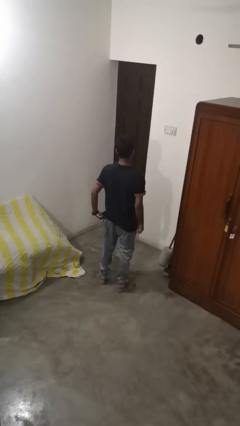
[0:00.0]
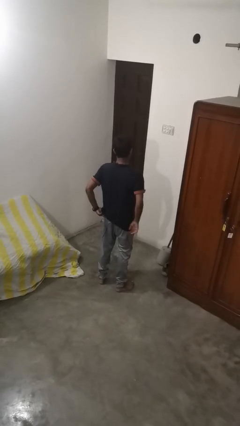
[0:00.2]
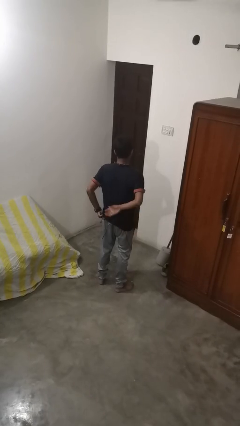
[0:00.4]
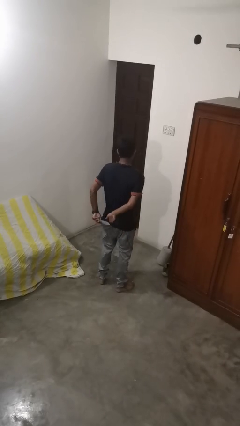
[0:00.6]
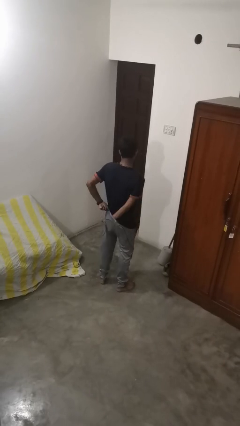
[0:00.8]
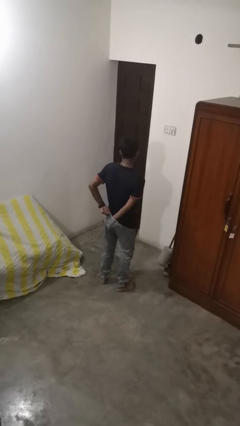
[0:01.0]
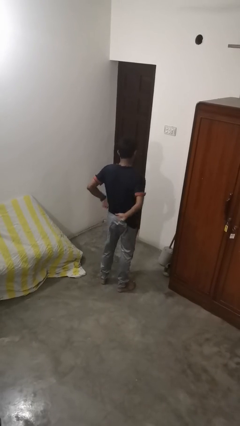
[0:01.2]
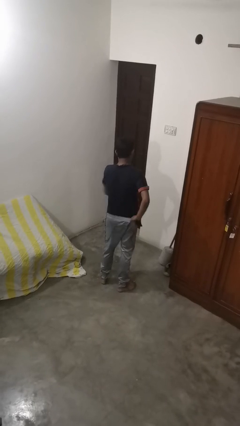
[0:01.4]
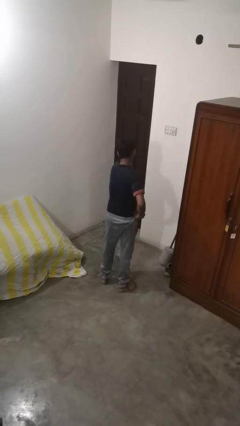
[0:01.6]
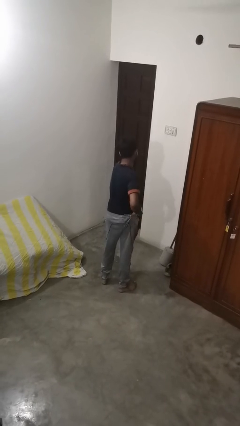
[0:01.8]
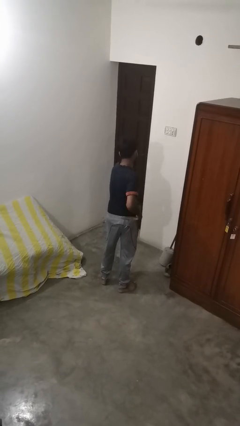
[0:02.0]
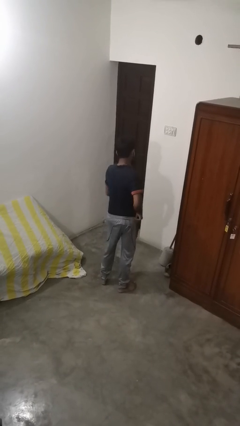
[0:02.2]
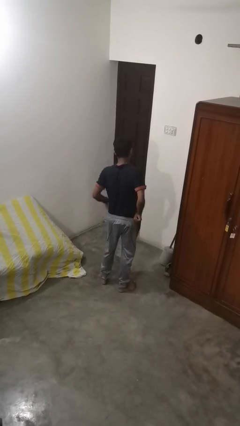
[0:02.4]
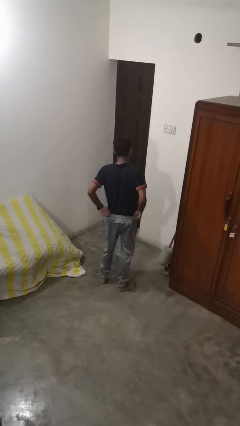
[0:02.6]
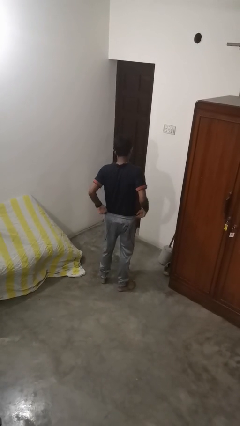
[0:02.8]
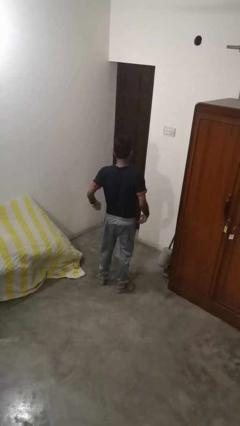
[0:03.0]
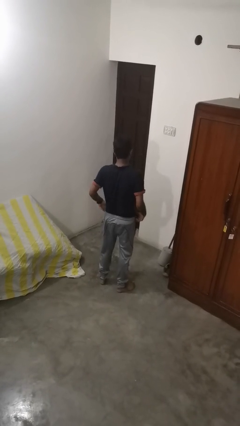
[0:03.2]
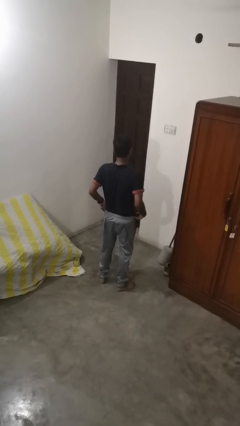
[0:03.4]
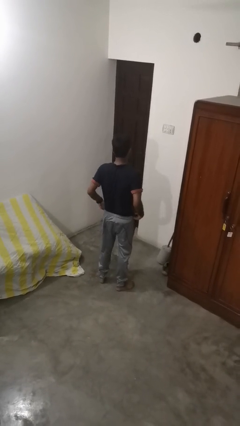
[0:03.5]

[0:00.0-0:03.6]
person tucks in shirt

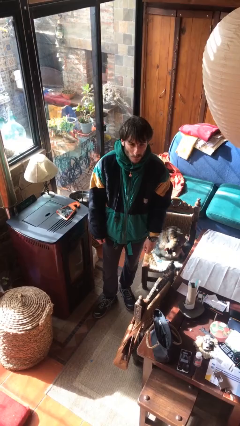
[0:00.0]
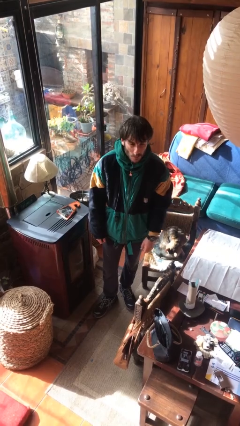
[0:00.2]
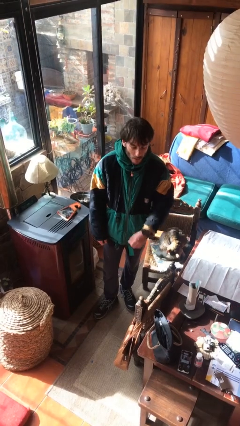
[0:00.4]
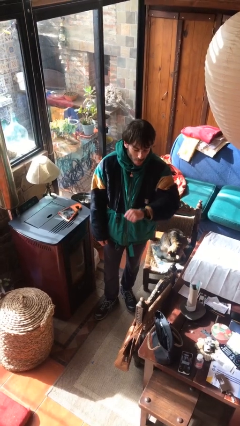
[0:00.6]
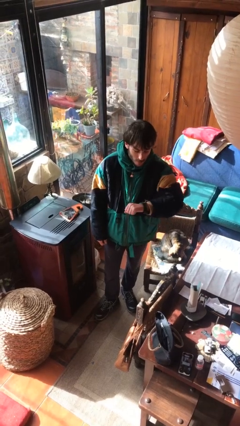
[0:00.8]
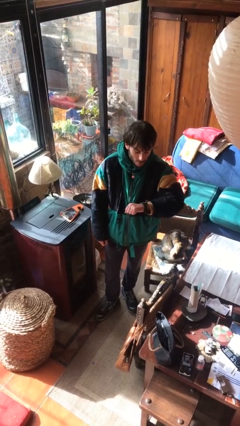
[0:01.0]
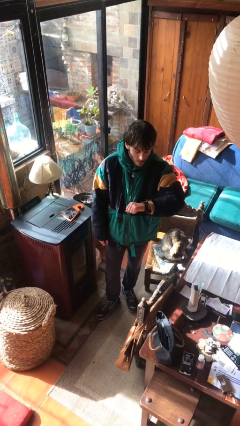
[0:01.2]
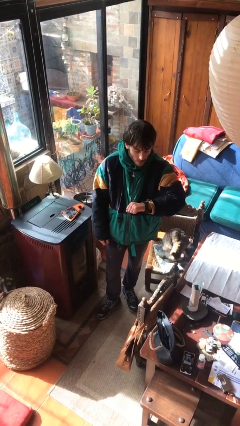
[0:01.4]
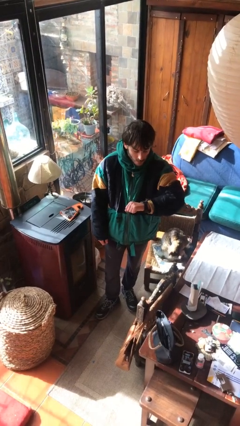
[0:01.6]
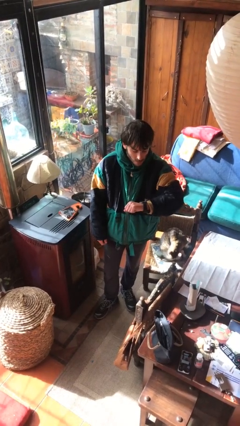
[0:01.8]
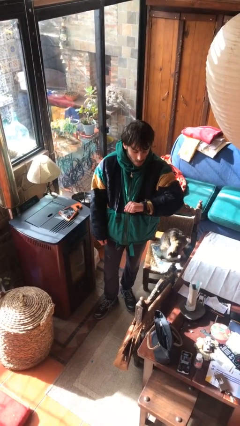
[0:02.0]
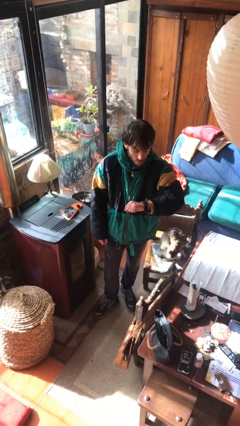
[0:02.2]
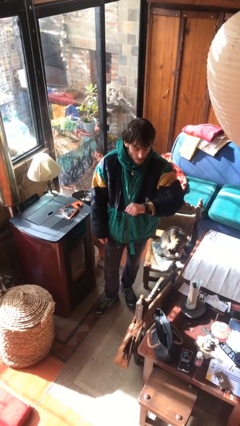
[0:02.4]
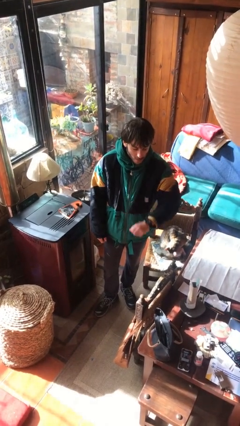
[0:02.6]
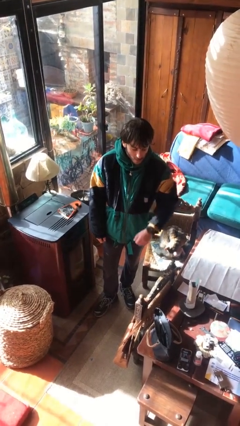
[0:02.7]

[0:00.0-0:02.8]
person looks at wristwatch

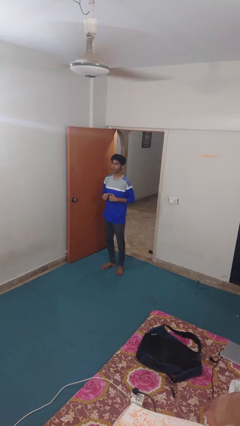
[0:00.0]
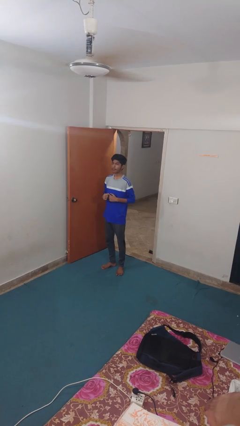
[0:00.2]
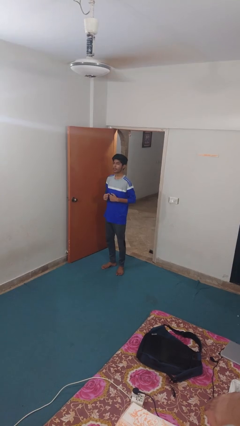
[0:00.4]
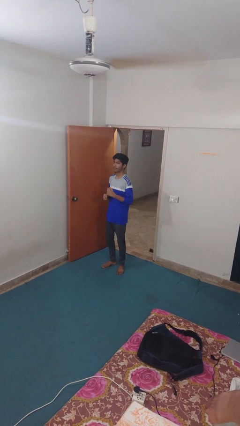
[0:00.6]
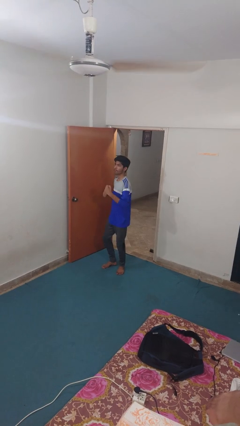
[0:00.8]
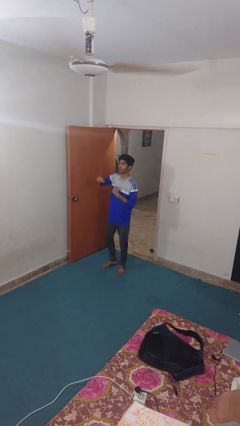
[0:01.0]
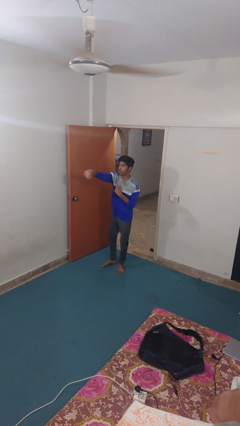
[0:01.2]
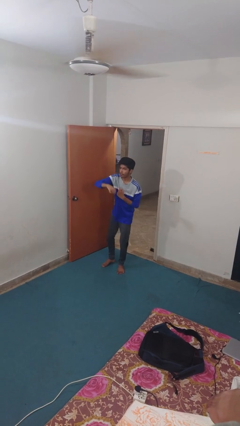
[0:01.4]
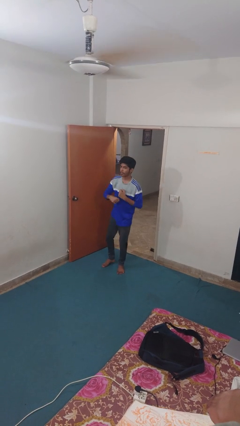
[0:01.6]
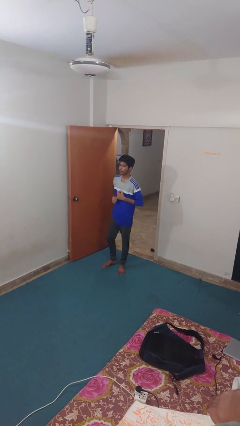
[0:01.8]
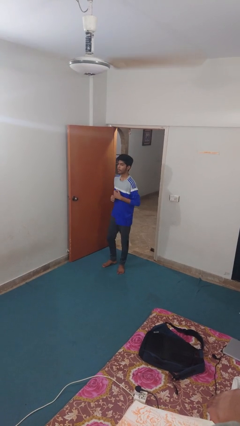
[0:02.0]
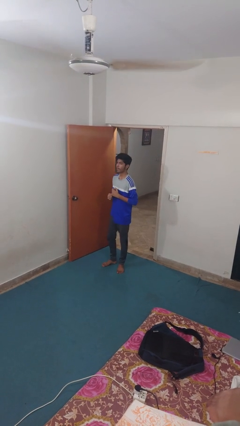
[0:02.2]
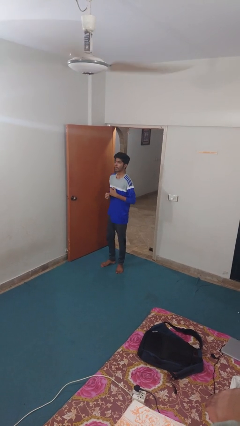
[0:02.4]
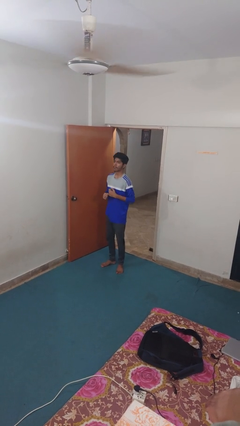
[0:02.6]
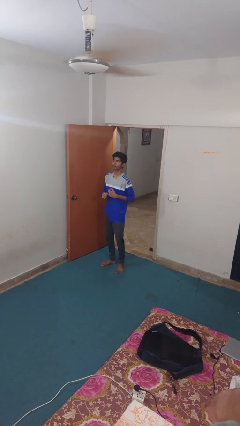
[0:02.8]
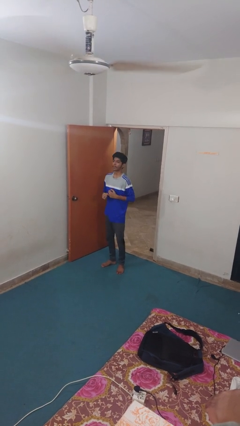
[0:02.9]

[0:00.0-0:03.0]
person punches

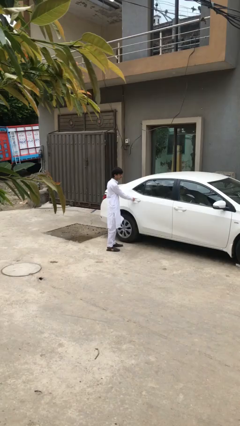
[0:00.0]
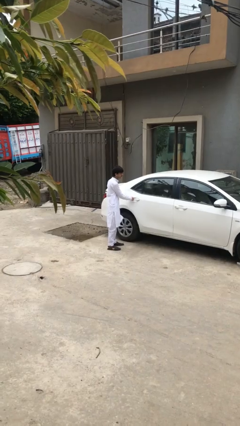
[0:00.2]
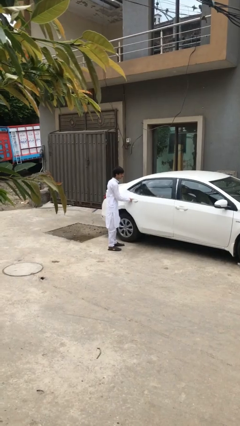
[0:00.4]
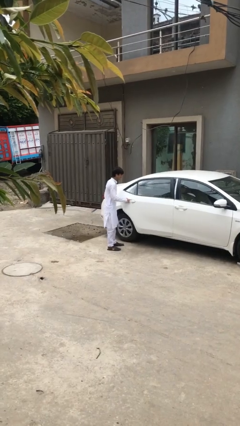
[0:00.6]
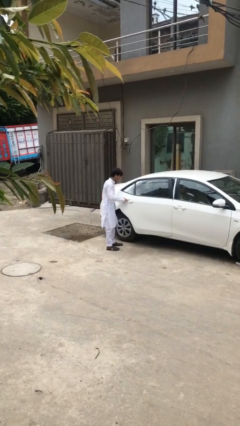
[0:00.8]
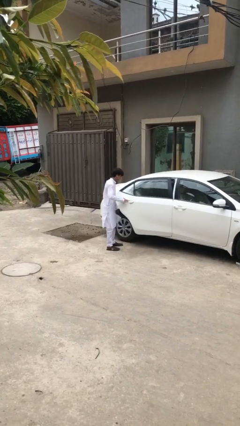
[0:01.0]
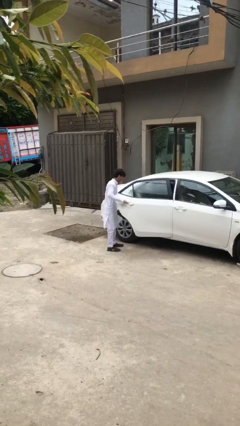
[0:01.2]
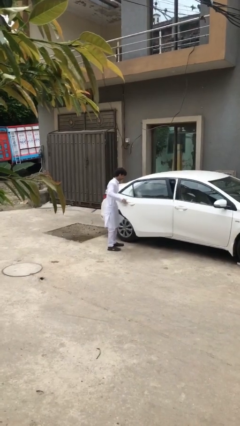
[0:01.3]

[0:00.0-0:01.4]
person opens car door

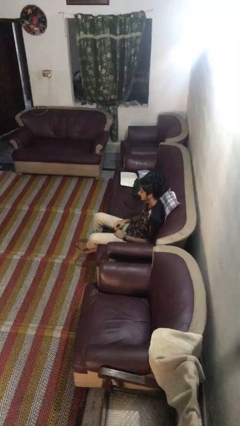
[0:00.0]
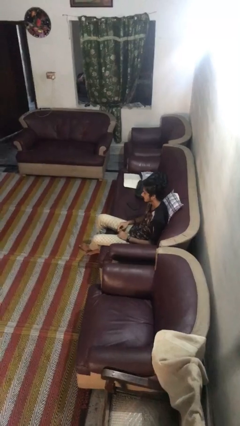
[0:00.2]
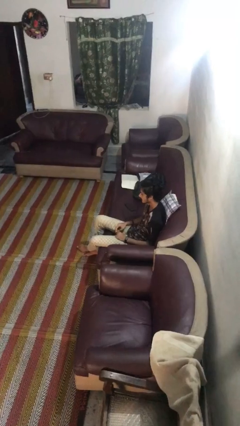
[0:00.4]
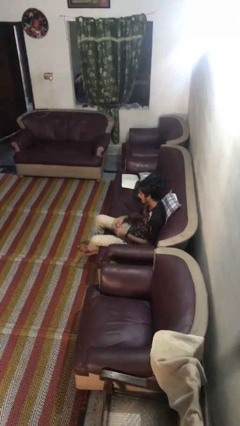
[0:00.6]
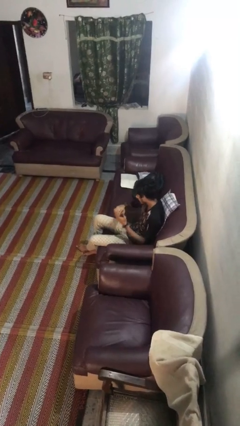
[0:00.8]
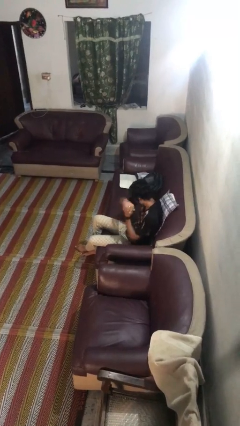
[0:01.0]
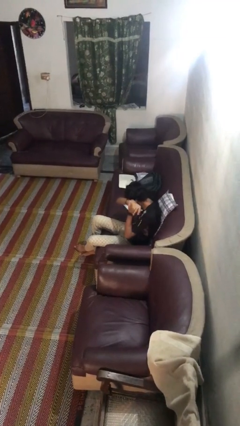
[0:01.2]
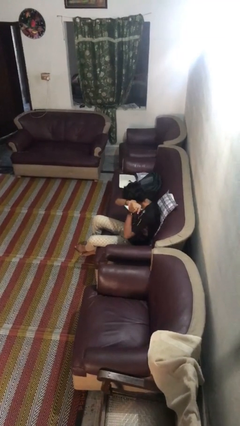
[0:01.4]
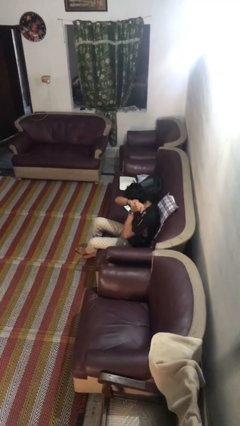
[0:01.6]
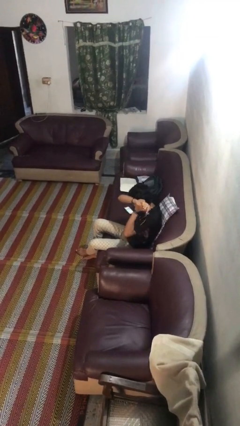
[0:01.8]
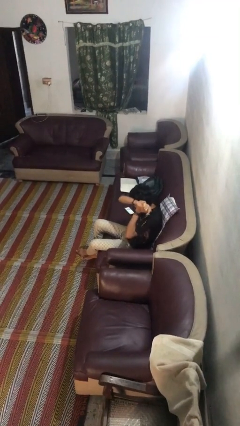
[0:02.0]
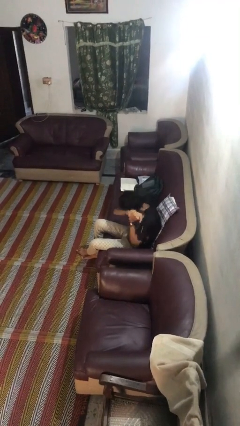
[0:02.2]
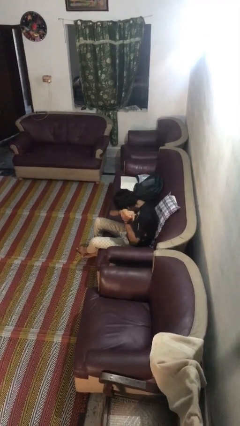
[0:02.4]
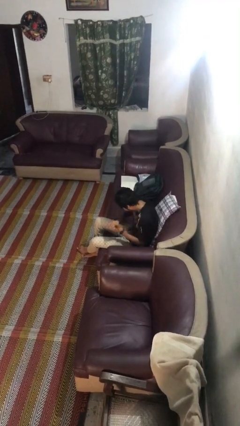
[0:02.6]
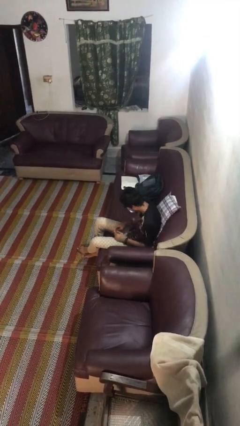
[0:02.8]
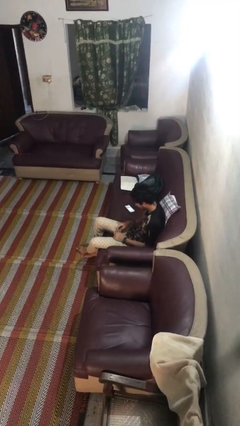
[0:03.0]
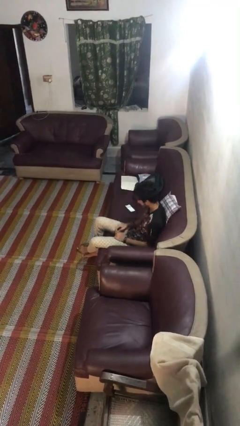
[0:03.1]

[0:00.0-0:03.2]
person sneezes into arm

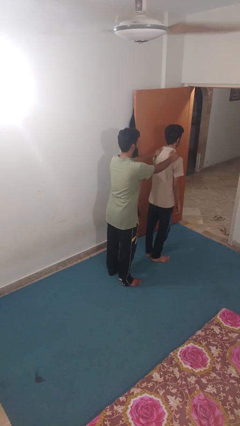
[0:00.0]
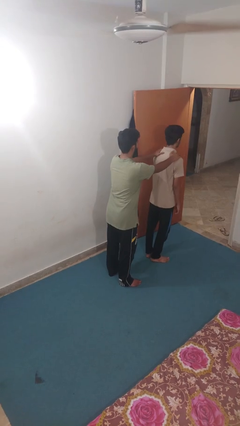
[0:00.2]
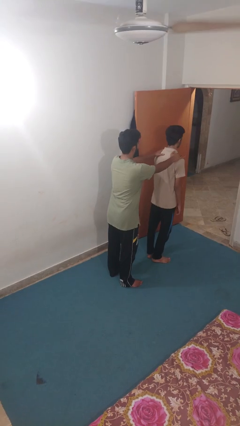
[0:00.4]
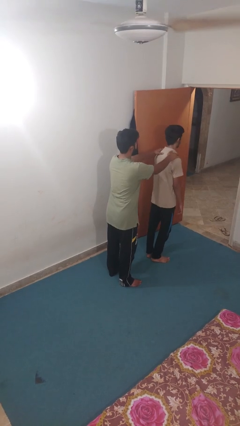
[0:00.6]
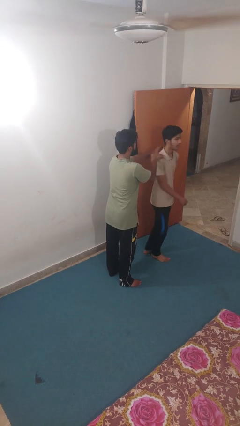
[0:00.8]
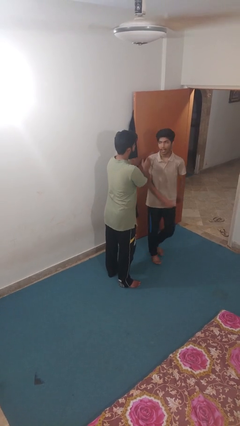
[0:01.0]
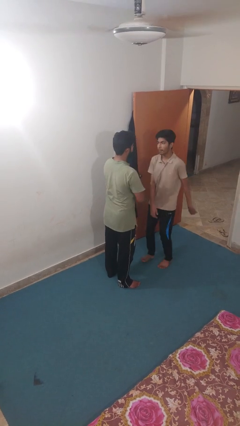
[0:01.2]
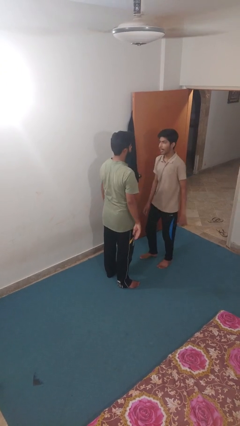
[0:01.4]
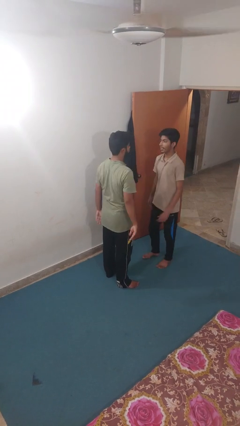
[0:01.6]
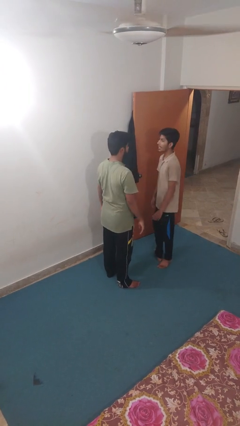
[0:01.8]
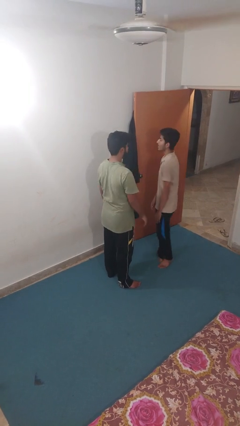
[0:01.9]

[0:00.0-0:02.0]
person spins person around

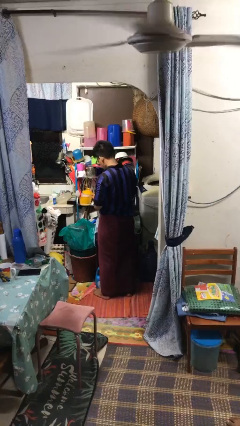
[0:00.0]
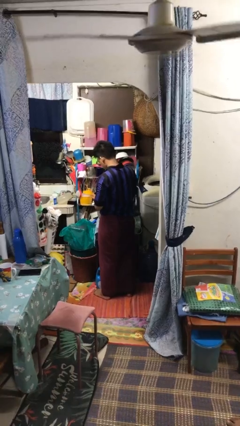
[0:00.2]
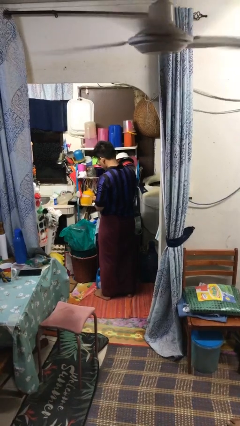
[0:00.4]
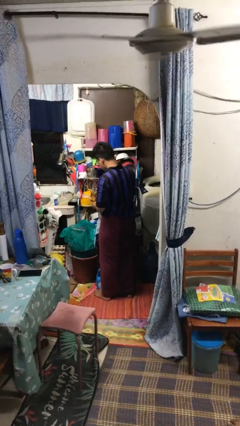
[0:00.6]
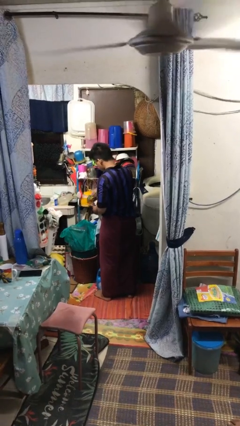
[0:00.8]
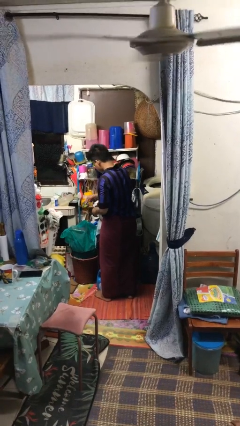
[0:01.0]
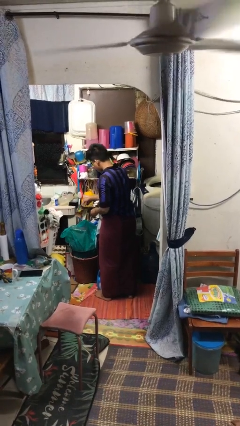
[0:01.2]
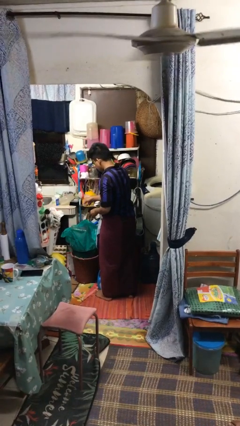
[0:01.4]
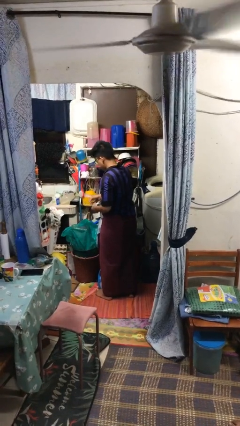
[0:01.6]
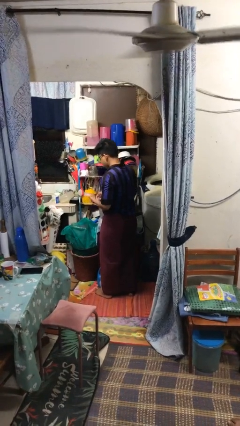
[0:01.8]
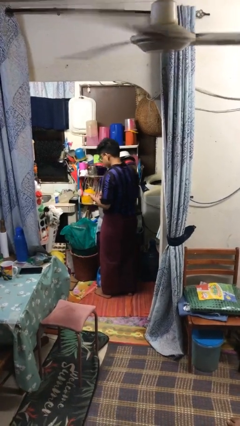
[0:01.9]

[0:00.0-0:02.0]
person discards trash
